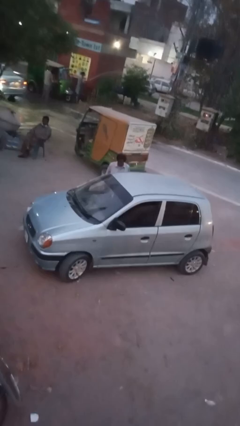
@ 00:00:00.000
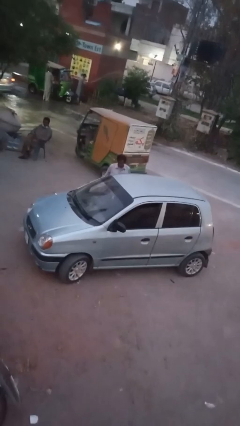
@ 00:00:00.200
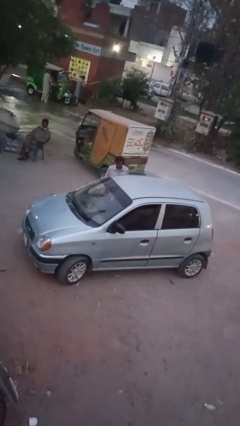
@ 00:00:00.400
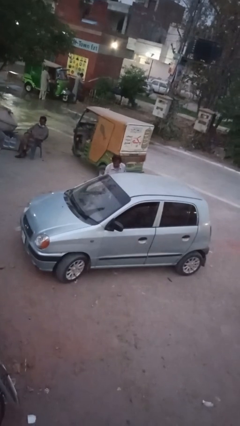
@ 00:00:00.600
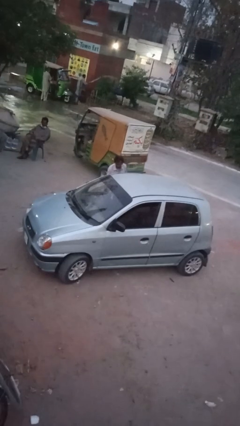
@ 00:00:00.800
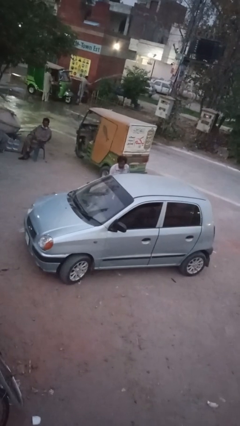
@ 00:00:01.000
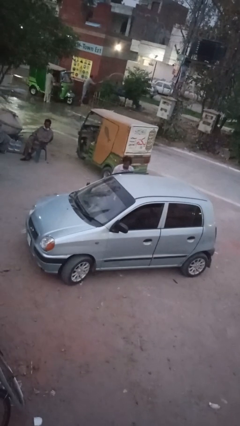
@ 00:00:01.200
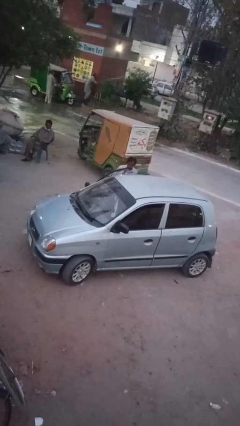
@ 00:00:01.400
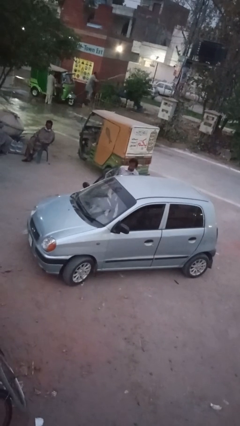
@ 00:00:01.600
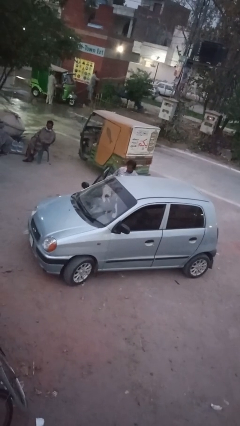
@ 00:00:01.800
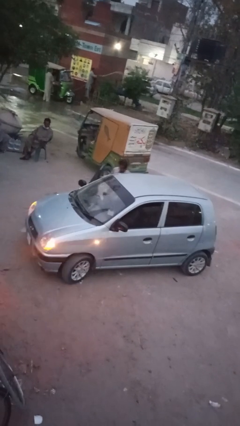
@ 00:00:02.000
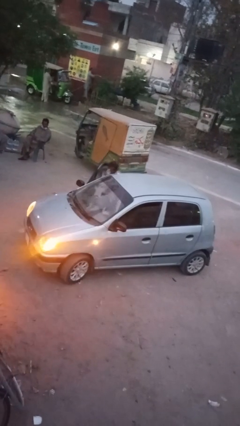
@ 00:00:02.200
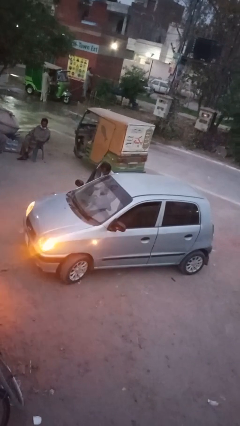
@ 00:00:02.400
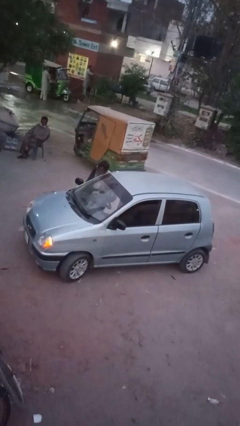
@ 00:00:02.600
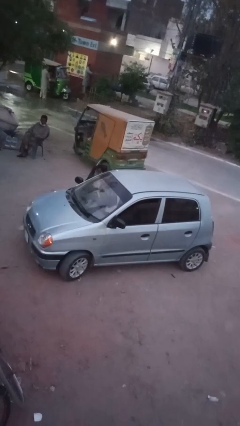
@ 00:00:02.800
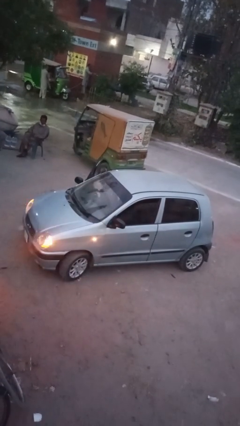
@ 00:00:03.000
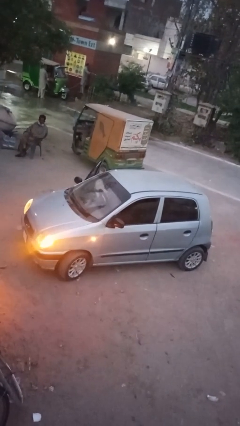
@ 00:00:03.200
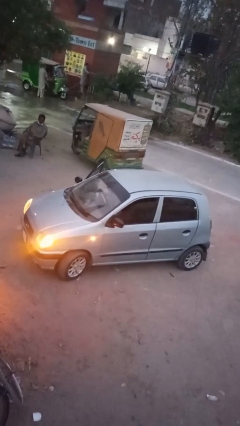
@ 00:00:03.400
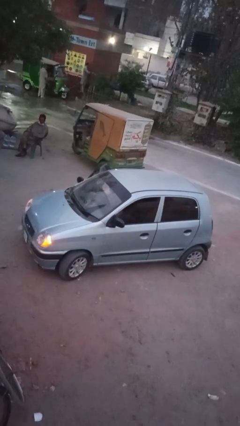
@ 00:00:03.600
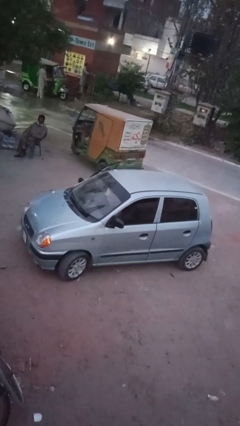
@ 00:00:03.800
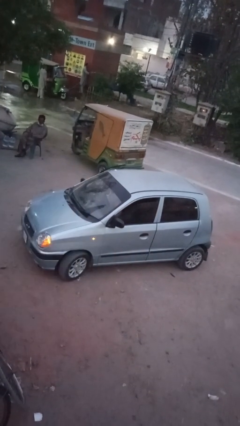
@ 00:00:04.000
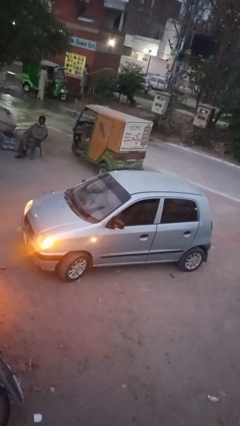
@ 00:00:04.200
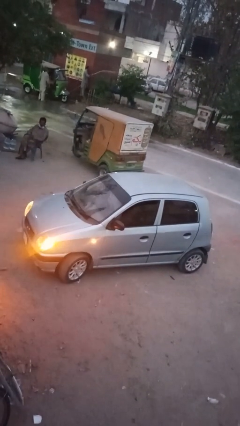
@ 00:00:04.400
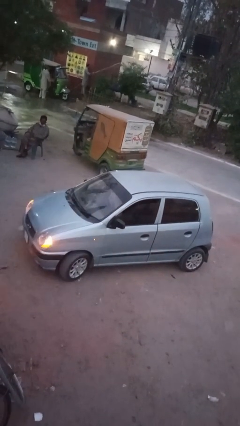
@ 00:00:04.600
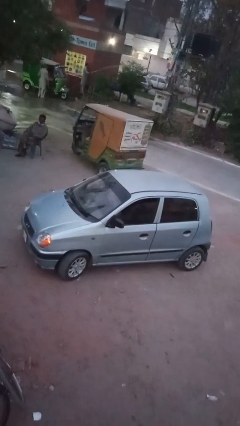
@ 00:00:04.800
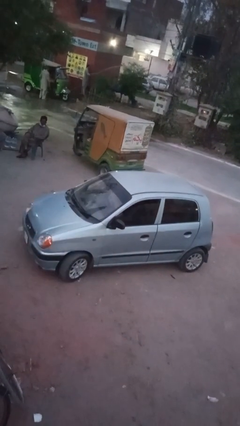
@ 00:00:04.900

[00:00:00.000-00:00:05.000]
car picks up person

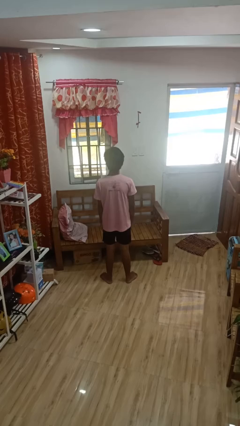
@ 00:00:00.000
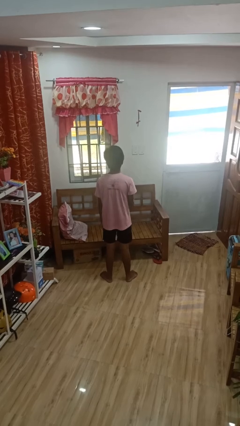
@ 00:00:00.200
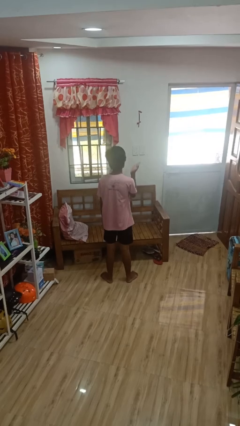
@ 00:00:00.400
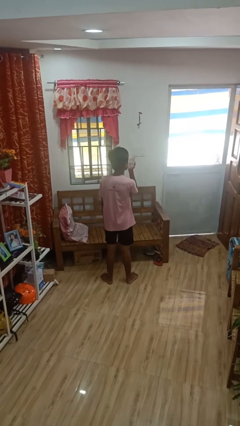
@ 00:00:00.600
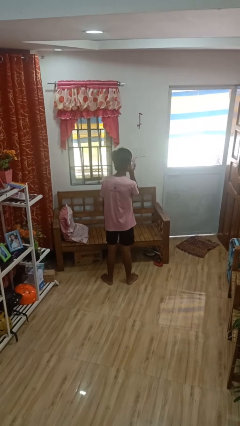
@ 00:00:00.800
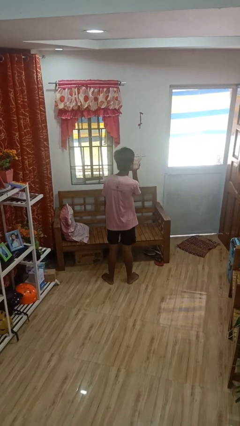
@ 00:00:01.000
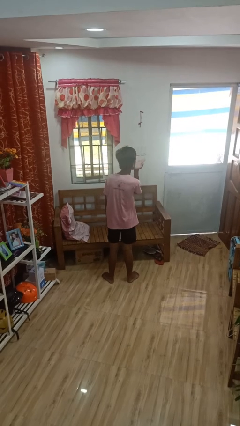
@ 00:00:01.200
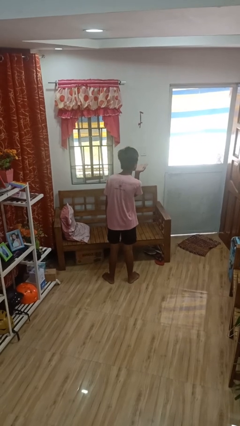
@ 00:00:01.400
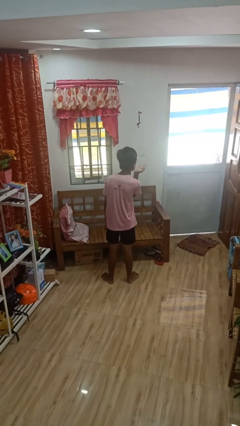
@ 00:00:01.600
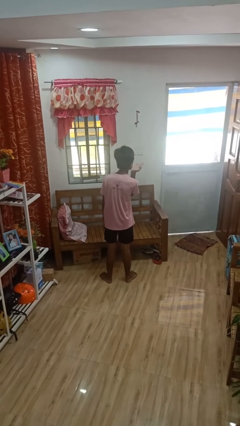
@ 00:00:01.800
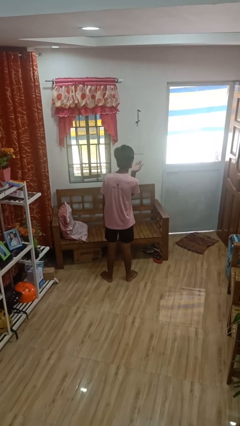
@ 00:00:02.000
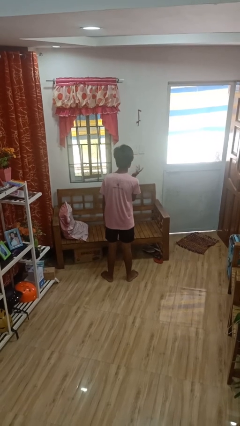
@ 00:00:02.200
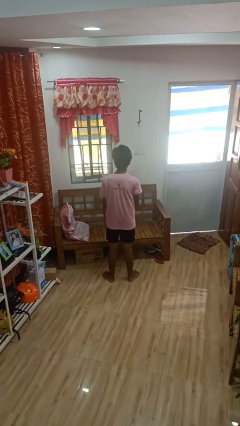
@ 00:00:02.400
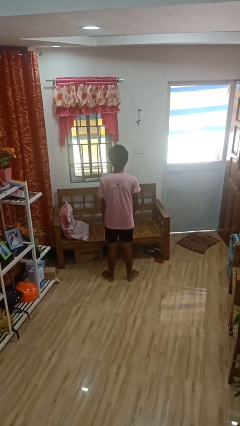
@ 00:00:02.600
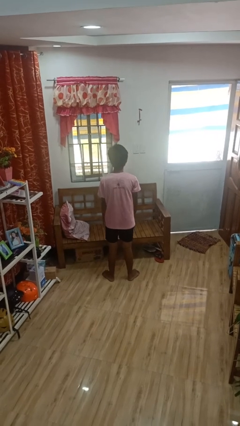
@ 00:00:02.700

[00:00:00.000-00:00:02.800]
person gestures blow kiss

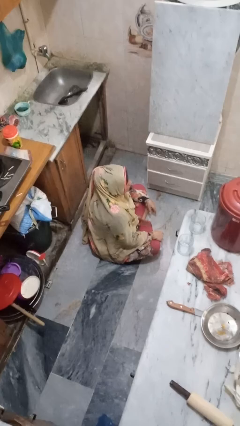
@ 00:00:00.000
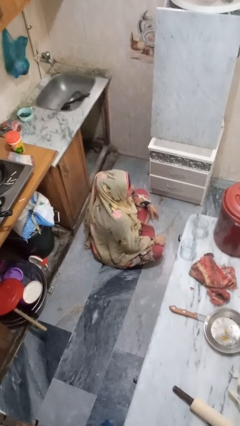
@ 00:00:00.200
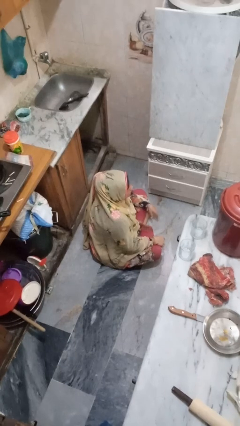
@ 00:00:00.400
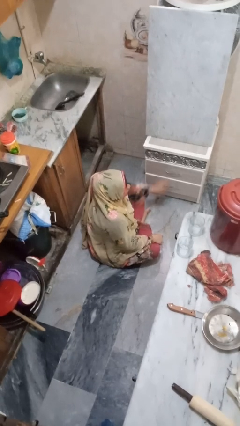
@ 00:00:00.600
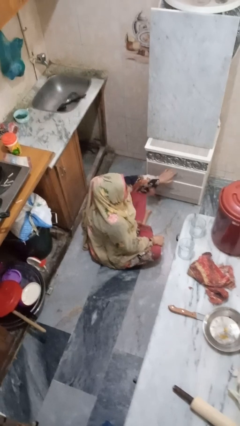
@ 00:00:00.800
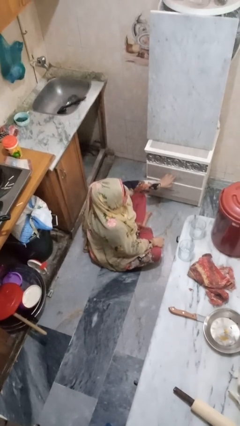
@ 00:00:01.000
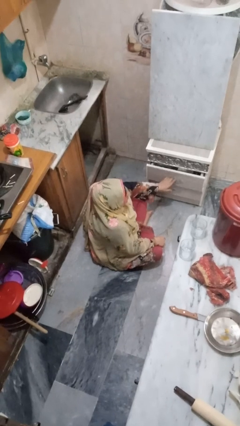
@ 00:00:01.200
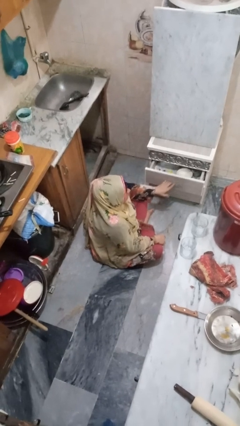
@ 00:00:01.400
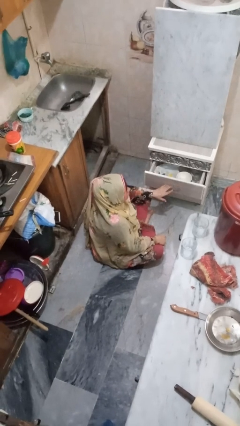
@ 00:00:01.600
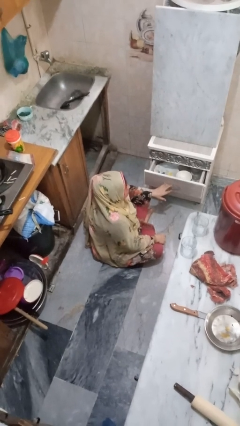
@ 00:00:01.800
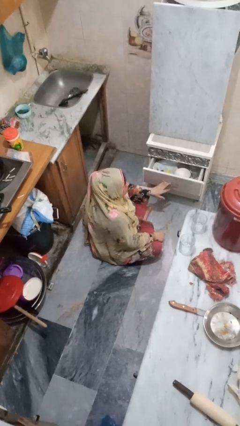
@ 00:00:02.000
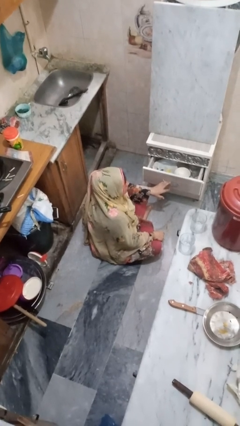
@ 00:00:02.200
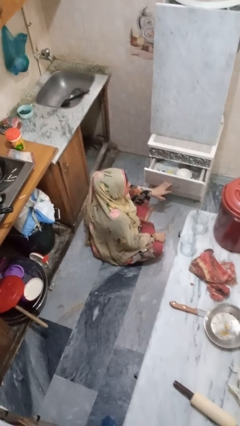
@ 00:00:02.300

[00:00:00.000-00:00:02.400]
person opens kitchen drawer

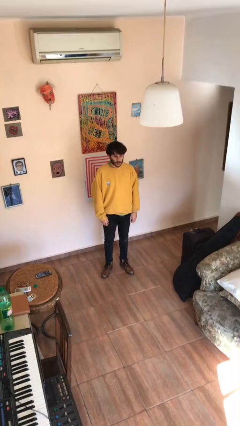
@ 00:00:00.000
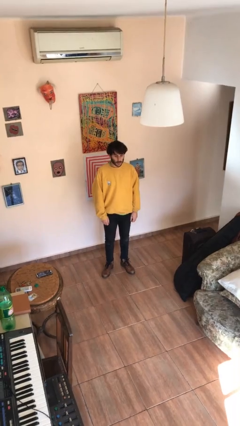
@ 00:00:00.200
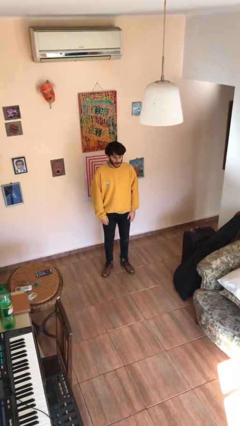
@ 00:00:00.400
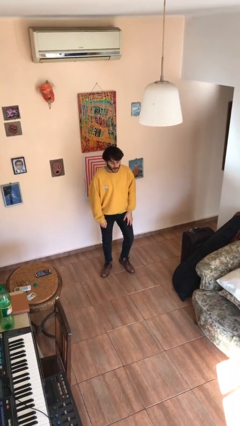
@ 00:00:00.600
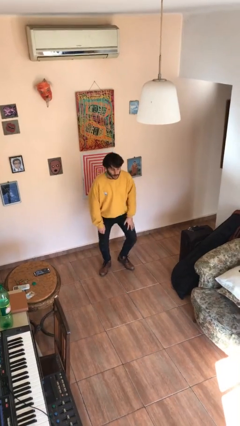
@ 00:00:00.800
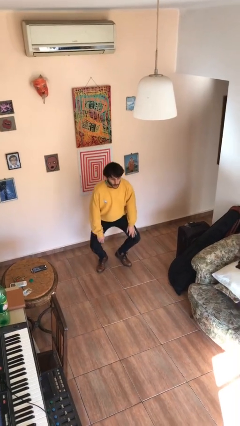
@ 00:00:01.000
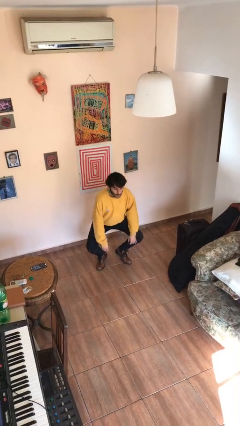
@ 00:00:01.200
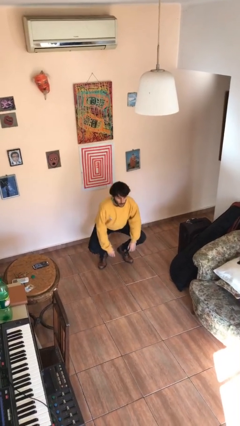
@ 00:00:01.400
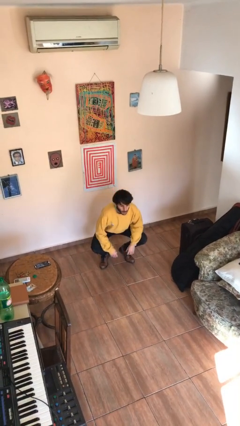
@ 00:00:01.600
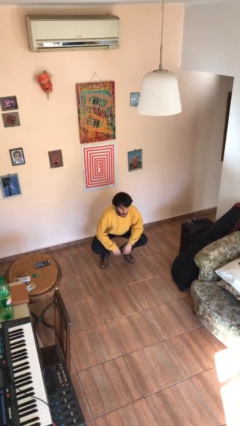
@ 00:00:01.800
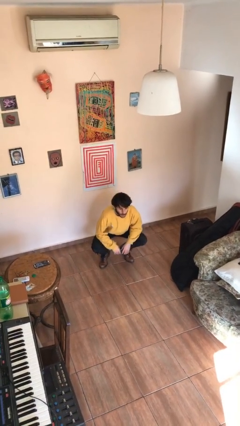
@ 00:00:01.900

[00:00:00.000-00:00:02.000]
person squats

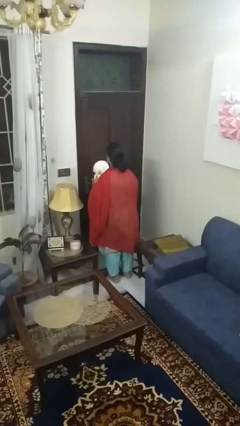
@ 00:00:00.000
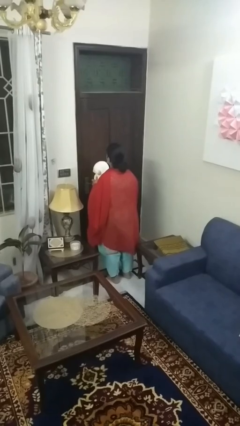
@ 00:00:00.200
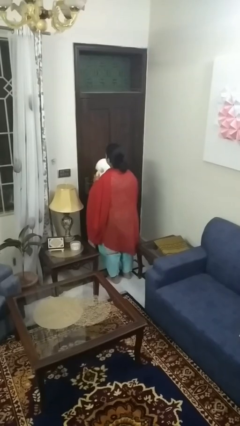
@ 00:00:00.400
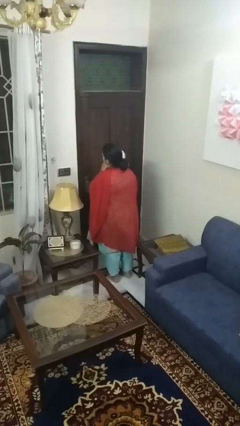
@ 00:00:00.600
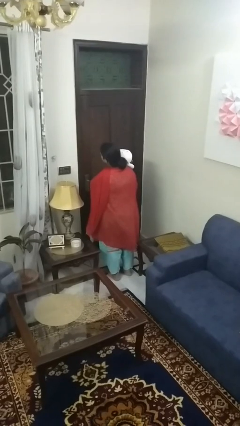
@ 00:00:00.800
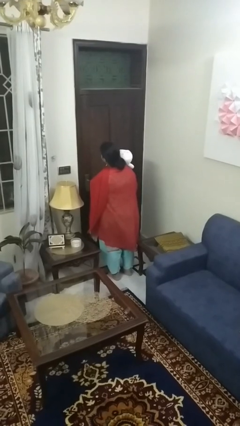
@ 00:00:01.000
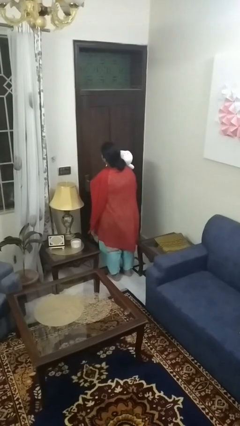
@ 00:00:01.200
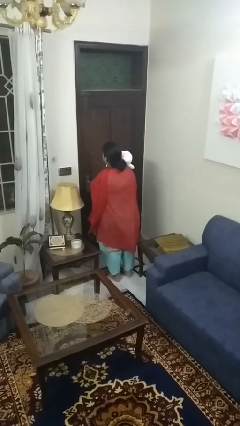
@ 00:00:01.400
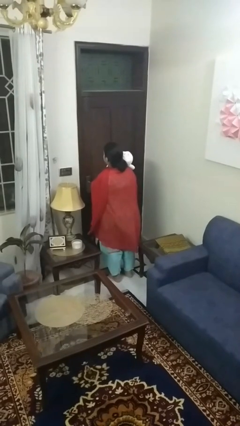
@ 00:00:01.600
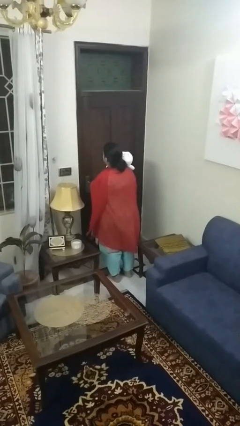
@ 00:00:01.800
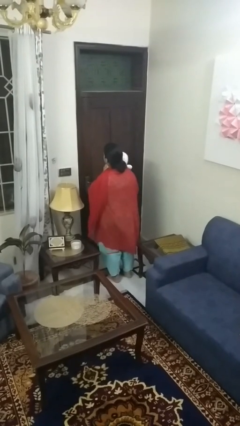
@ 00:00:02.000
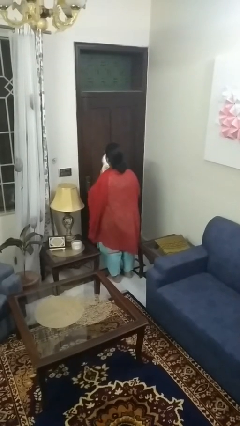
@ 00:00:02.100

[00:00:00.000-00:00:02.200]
person hugs stuffed animal

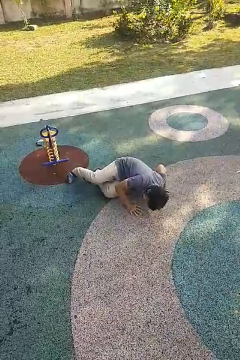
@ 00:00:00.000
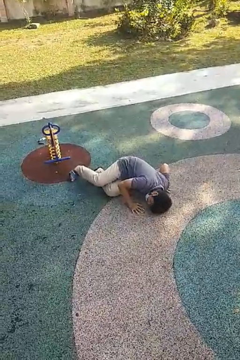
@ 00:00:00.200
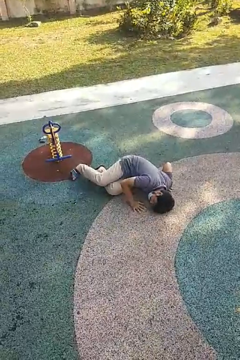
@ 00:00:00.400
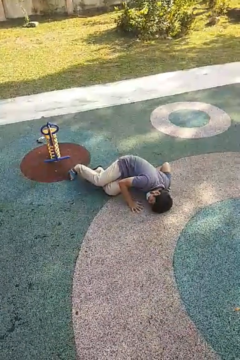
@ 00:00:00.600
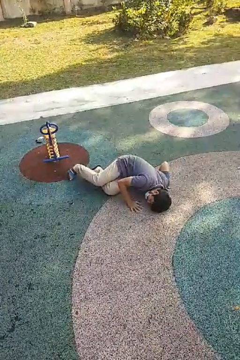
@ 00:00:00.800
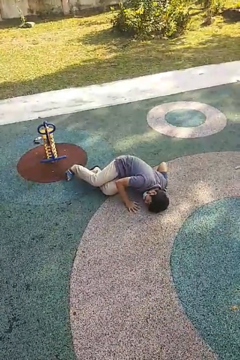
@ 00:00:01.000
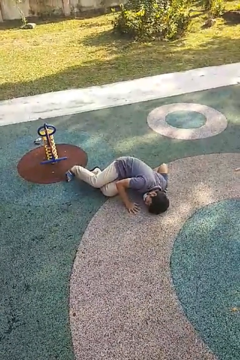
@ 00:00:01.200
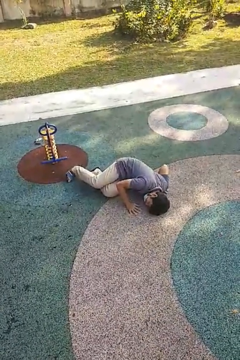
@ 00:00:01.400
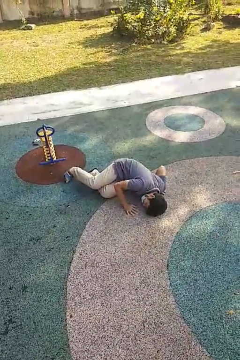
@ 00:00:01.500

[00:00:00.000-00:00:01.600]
person lies down on floor

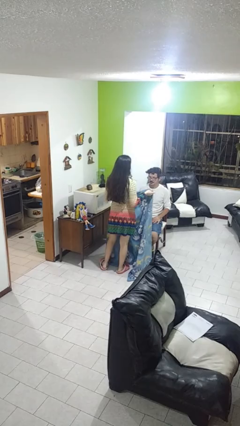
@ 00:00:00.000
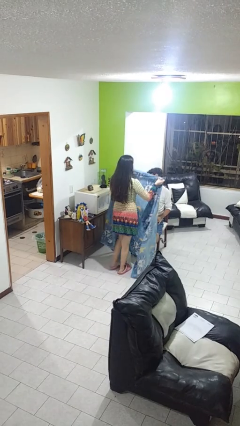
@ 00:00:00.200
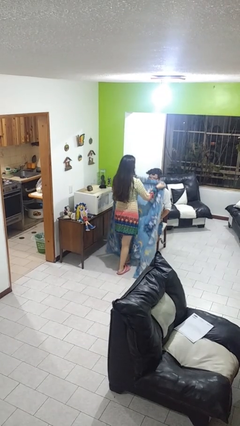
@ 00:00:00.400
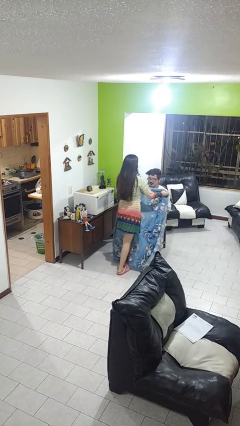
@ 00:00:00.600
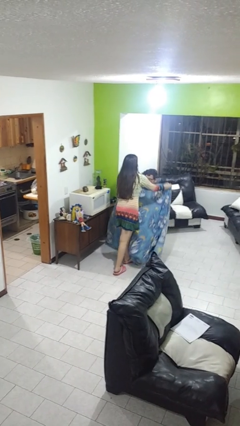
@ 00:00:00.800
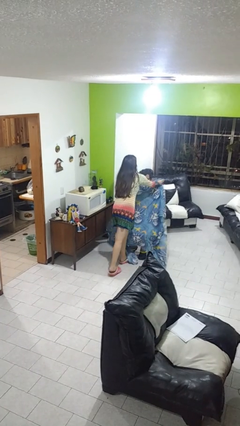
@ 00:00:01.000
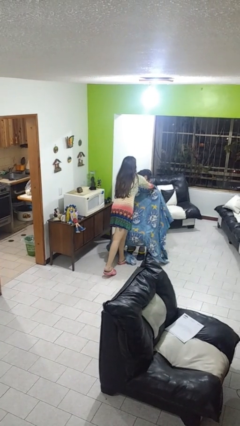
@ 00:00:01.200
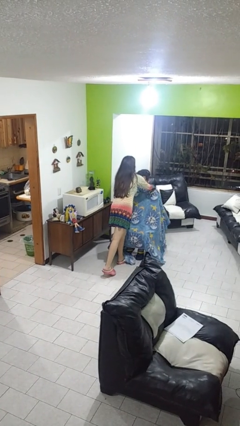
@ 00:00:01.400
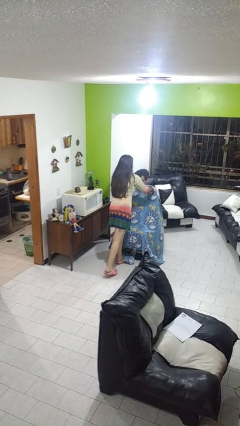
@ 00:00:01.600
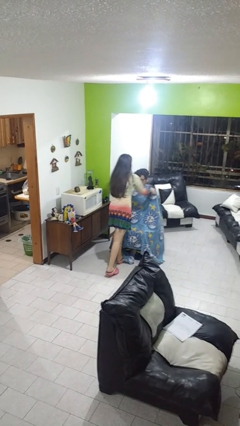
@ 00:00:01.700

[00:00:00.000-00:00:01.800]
person covers friend with blanket
